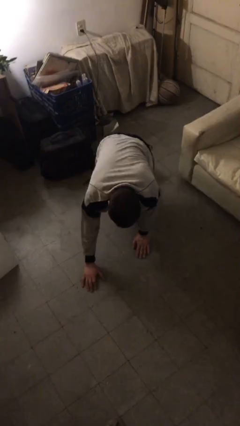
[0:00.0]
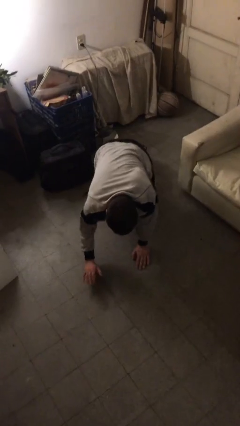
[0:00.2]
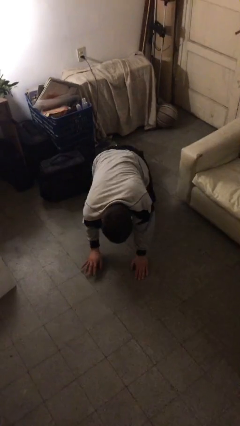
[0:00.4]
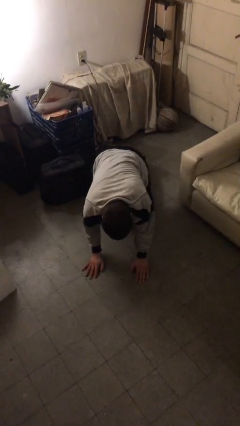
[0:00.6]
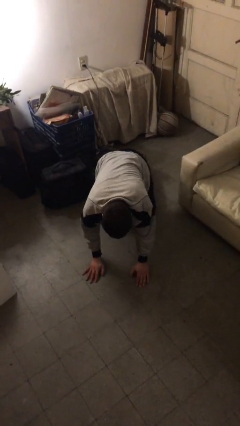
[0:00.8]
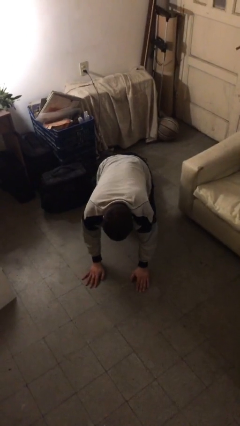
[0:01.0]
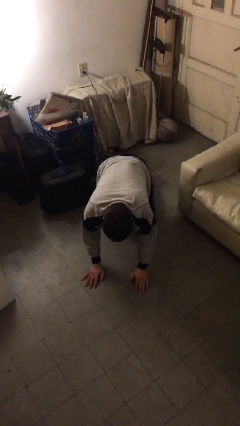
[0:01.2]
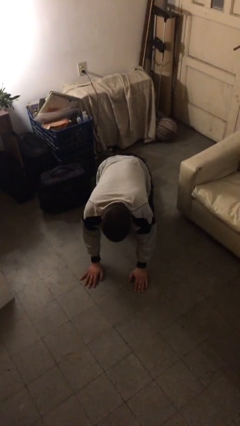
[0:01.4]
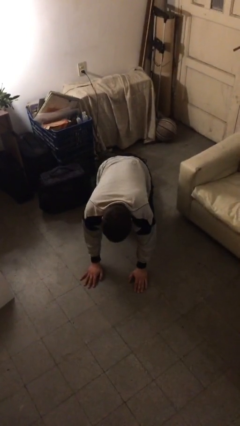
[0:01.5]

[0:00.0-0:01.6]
person crawls

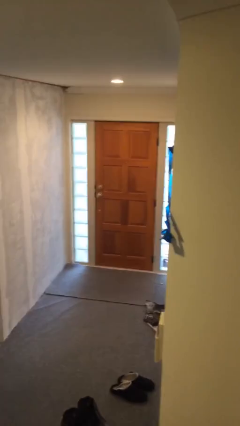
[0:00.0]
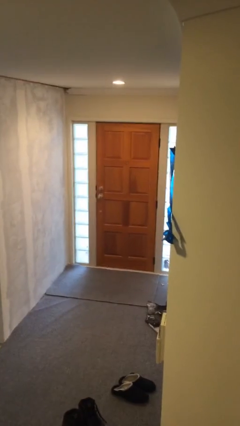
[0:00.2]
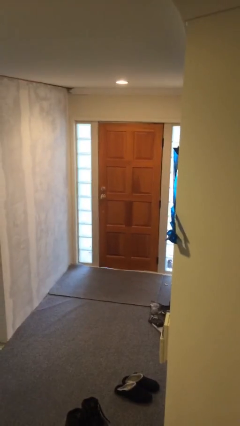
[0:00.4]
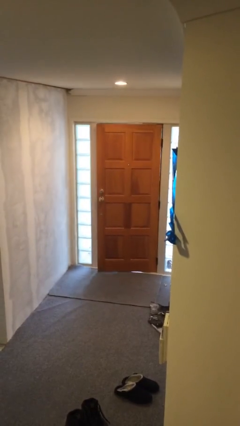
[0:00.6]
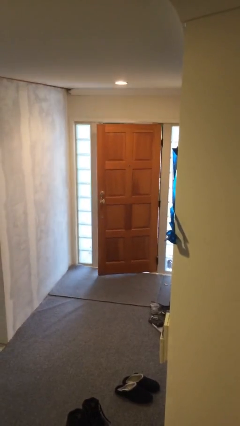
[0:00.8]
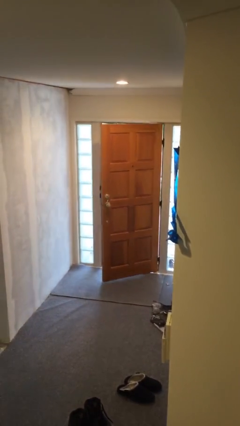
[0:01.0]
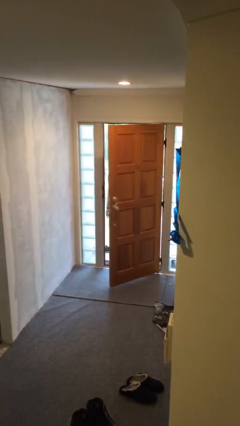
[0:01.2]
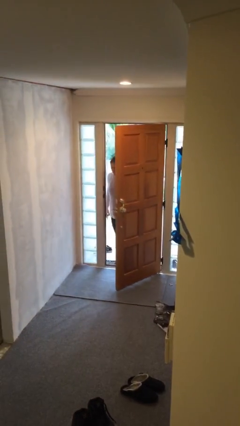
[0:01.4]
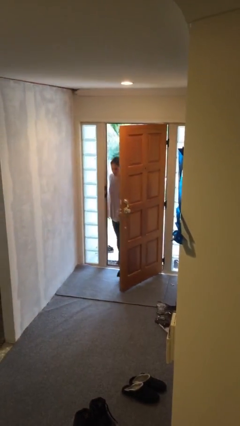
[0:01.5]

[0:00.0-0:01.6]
person opens facility door

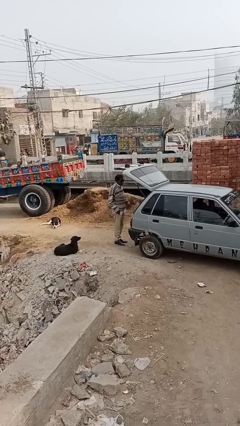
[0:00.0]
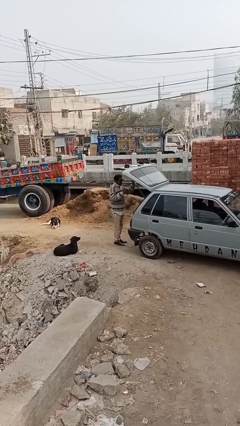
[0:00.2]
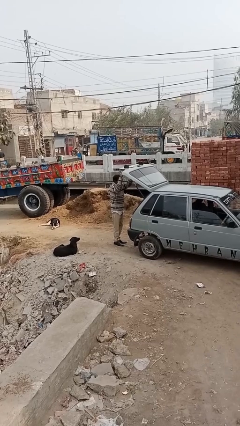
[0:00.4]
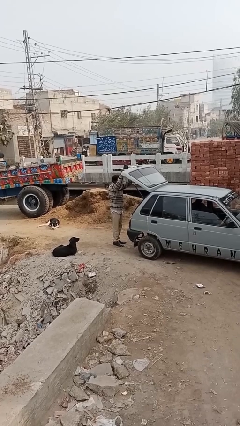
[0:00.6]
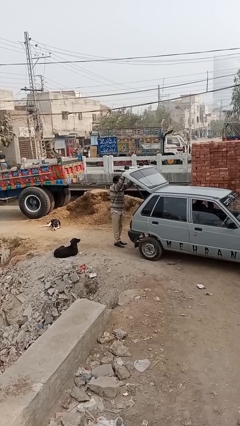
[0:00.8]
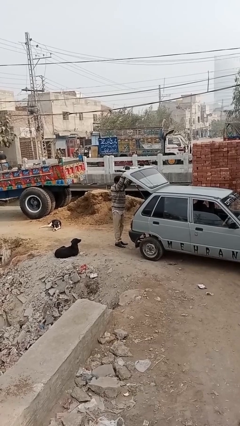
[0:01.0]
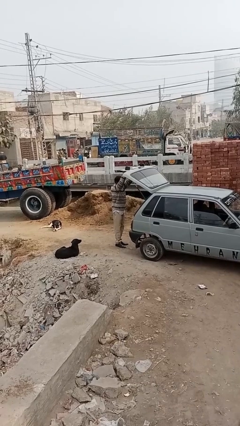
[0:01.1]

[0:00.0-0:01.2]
person closes car trunk

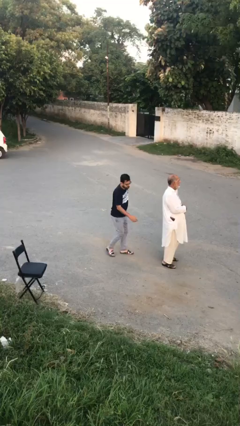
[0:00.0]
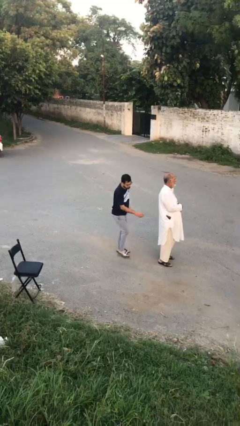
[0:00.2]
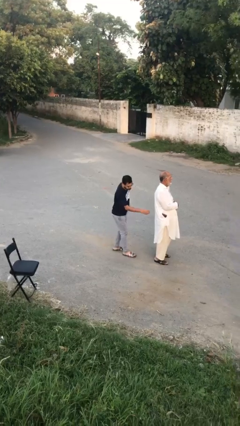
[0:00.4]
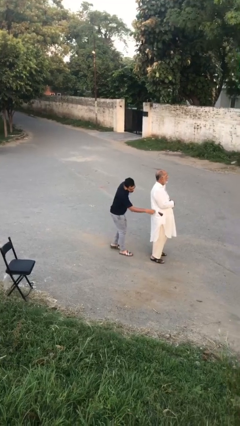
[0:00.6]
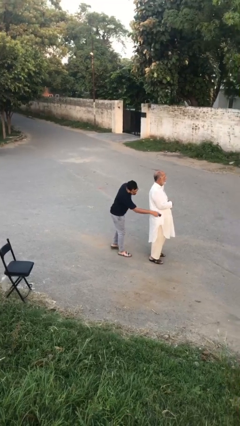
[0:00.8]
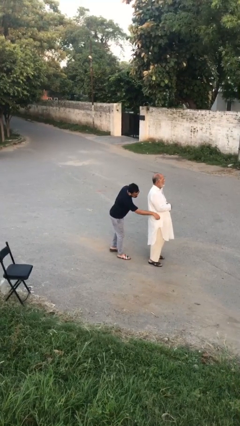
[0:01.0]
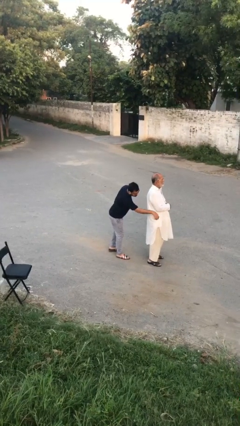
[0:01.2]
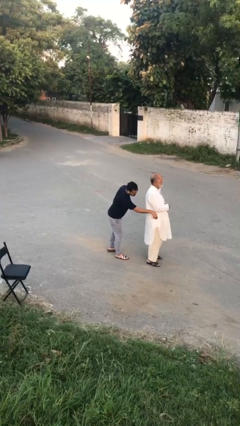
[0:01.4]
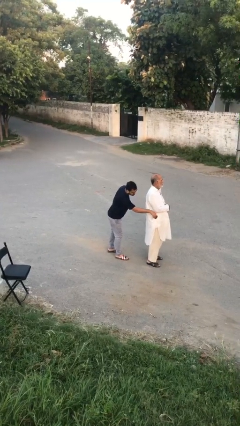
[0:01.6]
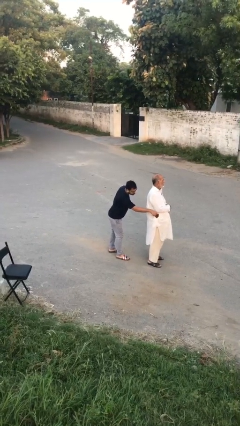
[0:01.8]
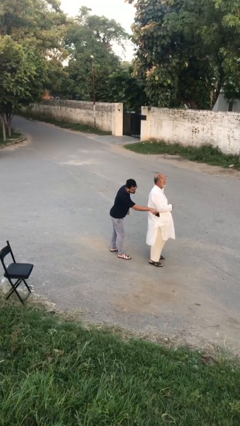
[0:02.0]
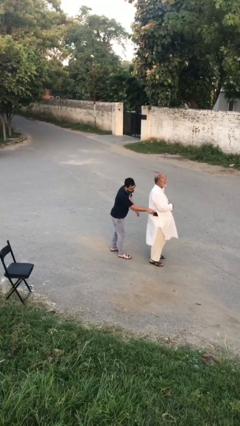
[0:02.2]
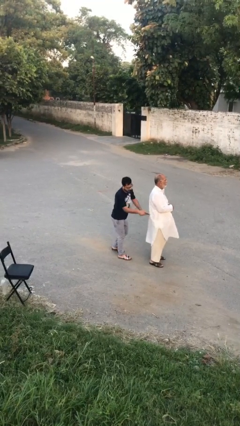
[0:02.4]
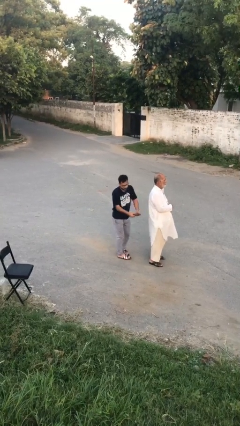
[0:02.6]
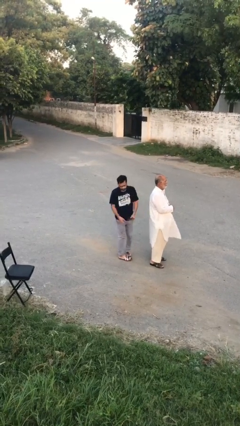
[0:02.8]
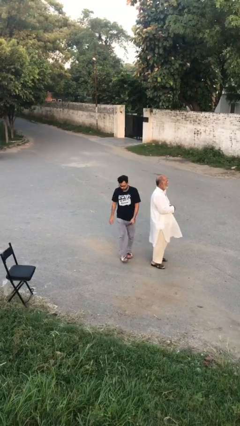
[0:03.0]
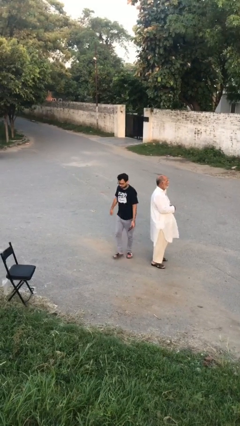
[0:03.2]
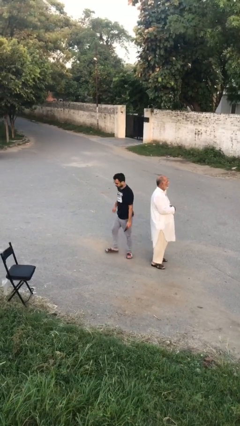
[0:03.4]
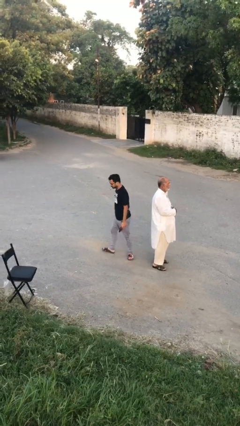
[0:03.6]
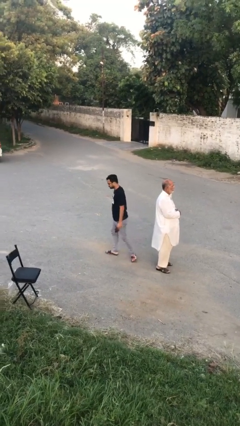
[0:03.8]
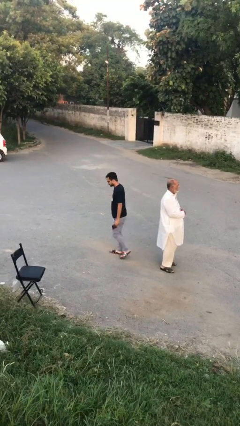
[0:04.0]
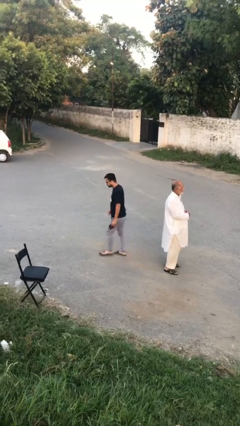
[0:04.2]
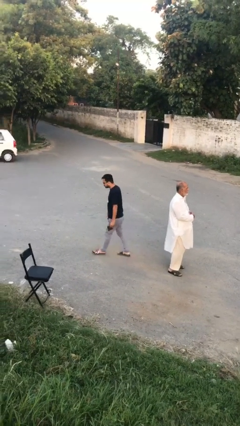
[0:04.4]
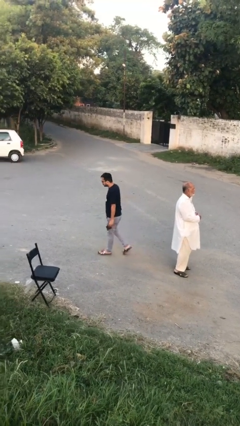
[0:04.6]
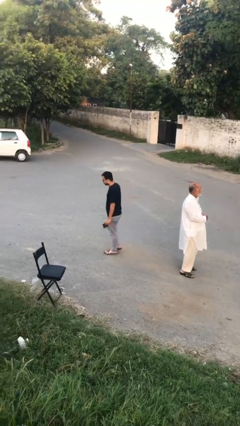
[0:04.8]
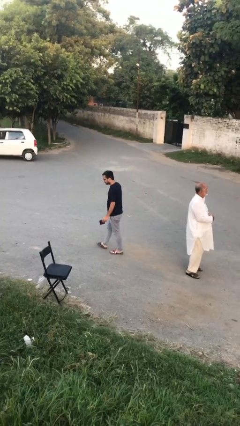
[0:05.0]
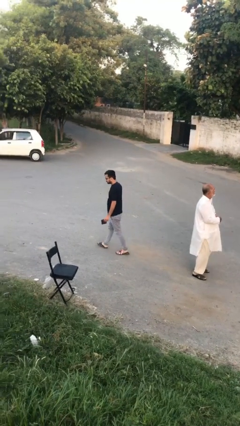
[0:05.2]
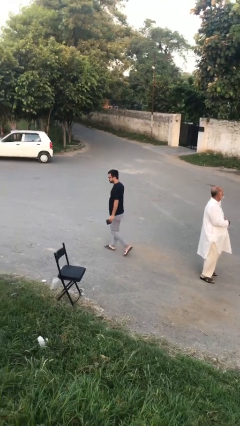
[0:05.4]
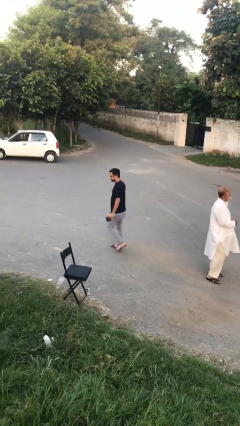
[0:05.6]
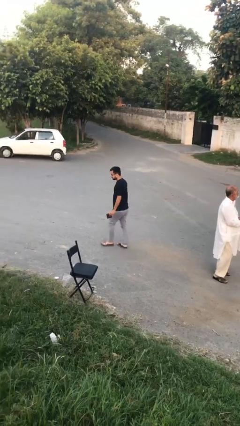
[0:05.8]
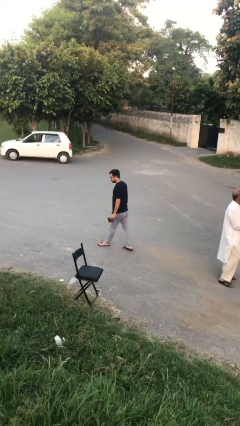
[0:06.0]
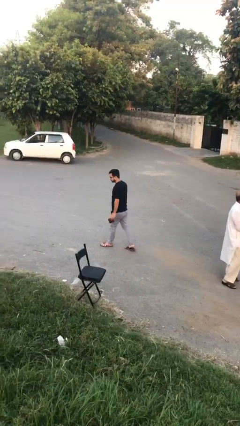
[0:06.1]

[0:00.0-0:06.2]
person steals object from person

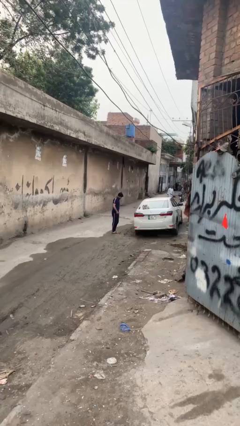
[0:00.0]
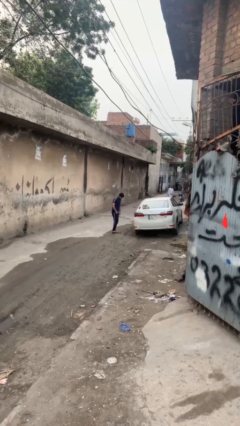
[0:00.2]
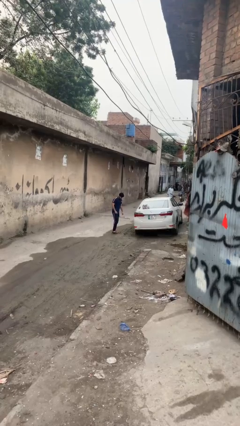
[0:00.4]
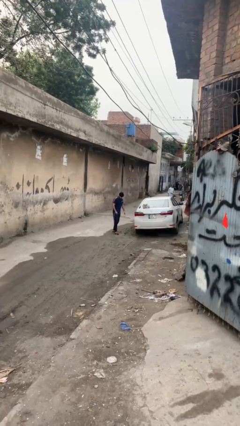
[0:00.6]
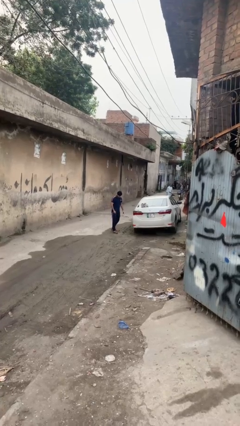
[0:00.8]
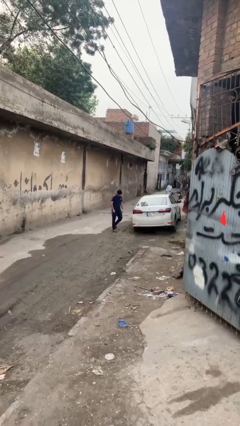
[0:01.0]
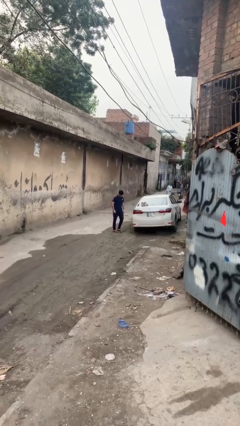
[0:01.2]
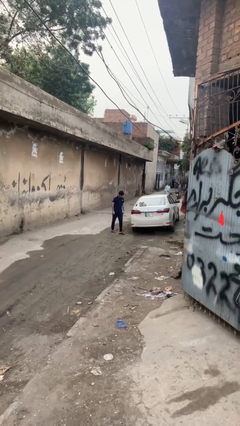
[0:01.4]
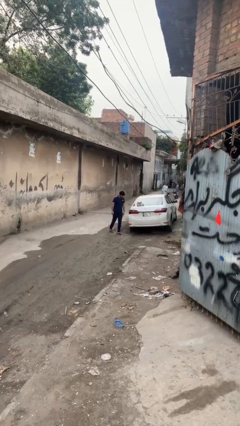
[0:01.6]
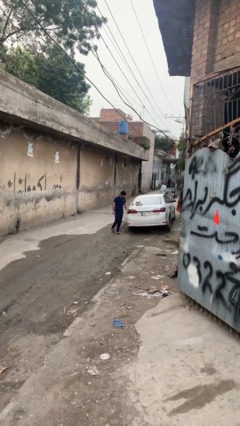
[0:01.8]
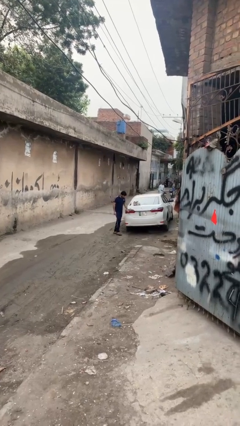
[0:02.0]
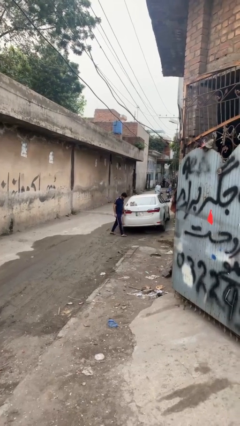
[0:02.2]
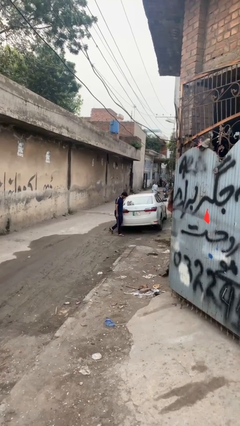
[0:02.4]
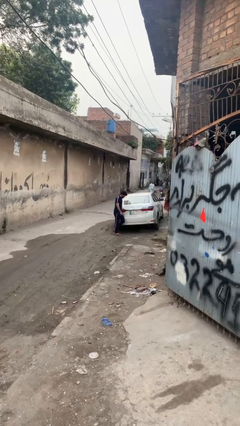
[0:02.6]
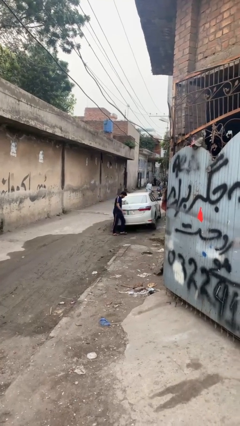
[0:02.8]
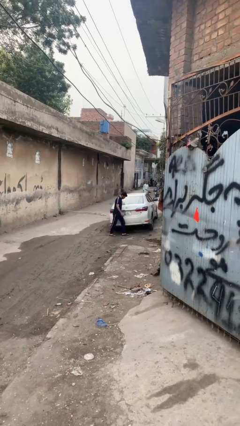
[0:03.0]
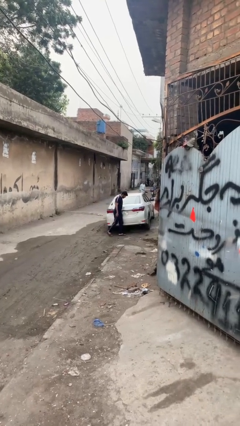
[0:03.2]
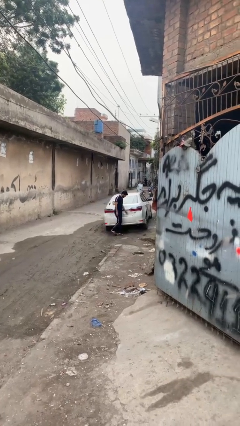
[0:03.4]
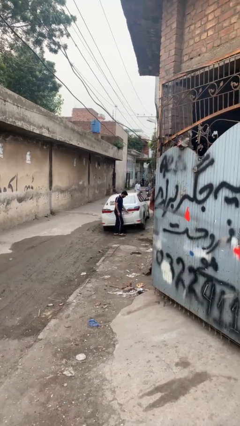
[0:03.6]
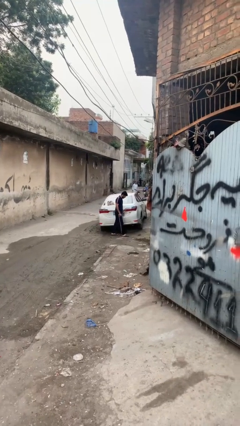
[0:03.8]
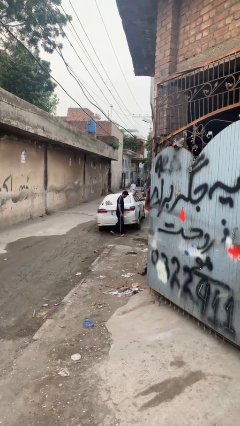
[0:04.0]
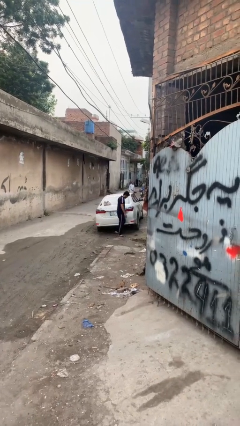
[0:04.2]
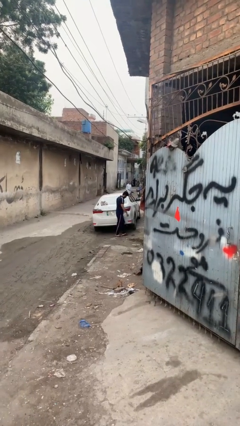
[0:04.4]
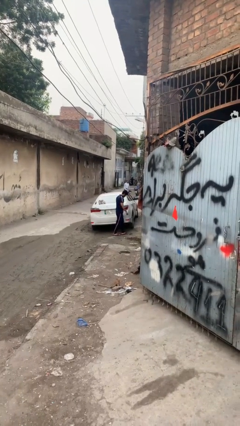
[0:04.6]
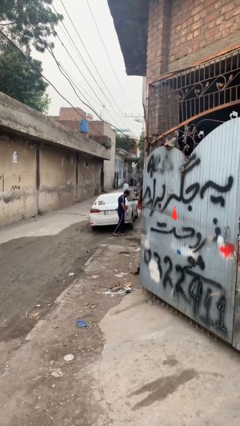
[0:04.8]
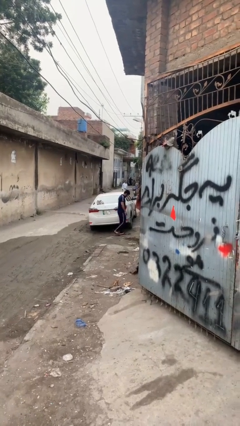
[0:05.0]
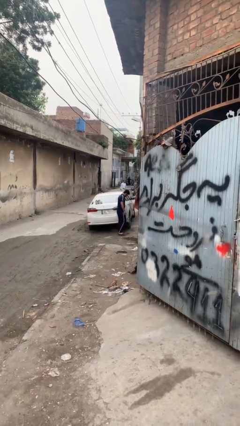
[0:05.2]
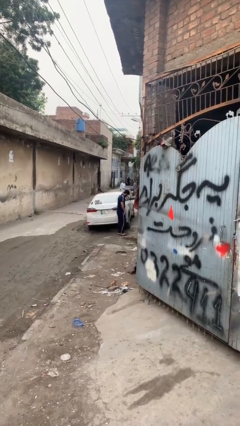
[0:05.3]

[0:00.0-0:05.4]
person walks around car

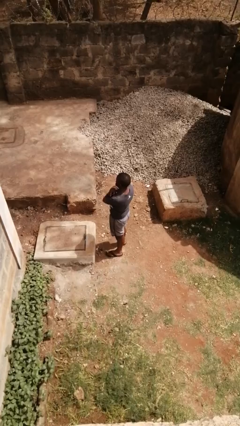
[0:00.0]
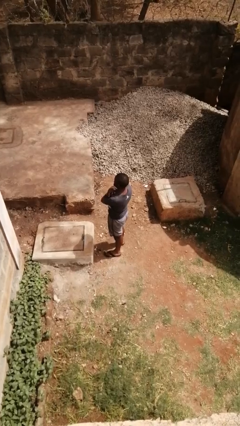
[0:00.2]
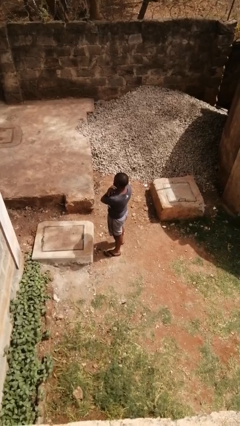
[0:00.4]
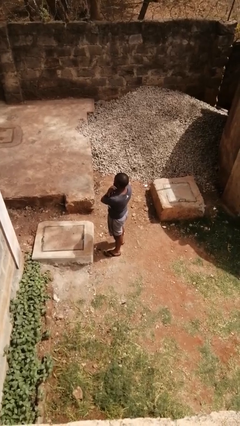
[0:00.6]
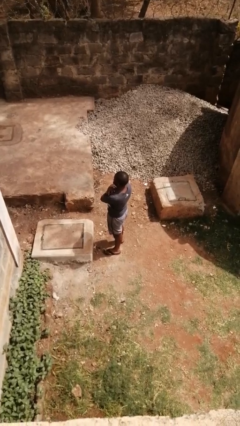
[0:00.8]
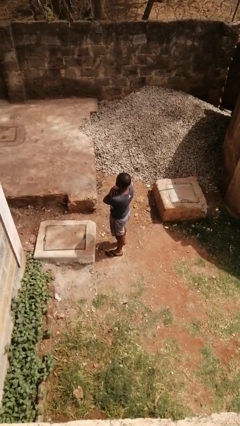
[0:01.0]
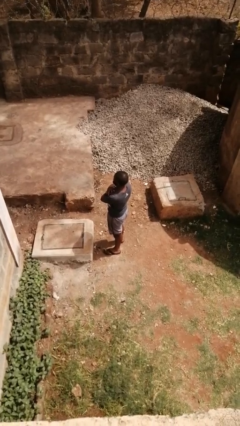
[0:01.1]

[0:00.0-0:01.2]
person gestures arms x

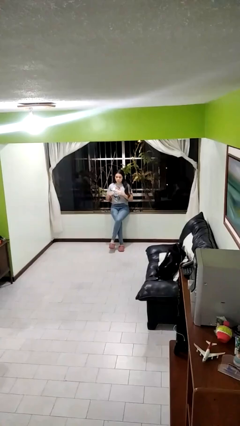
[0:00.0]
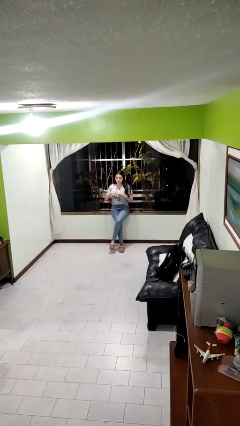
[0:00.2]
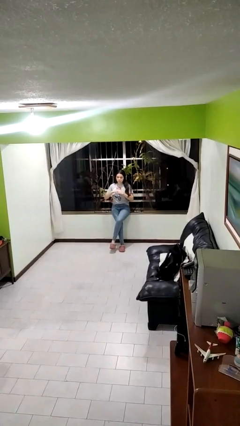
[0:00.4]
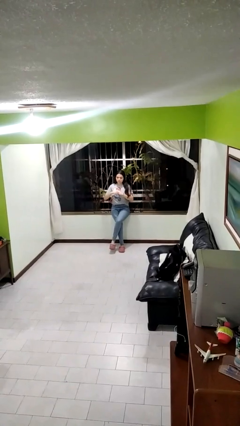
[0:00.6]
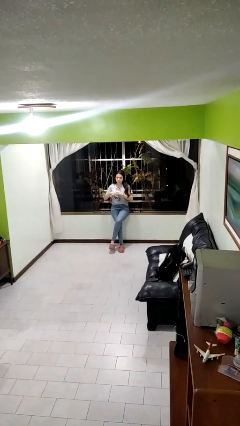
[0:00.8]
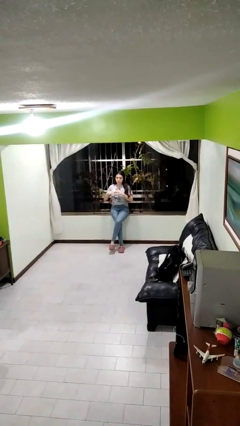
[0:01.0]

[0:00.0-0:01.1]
person puts on ring
